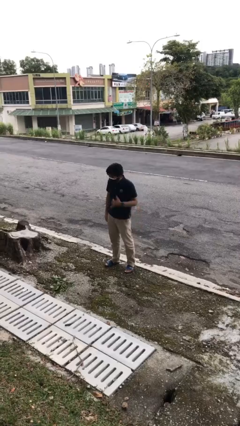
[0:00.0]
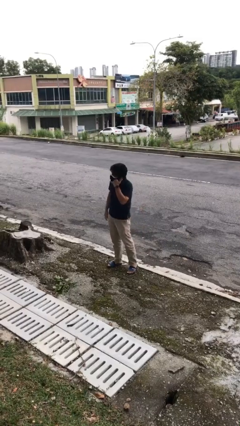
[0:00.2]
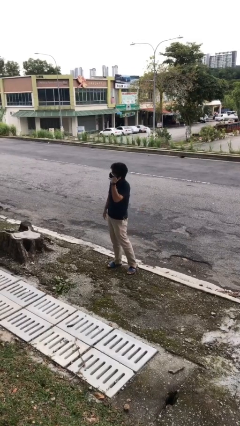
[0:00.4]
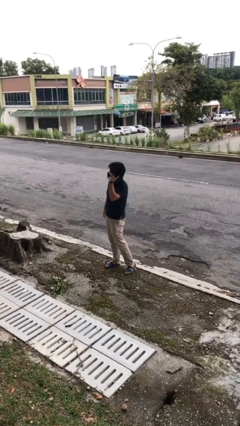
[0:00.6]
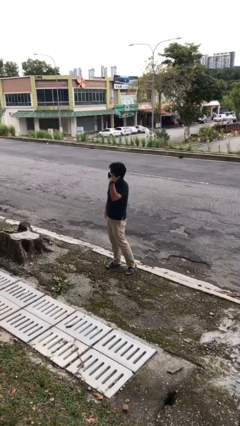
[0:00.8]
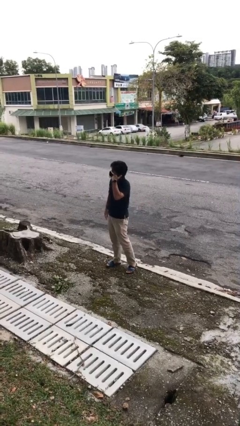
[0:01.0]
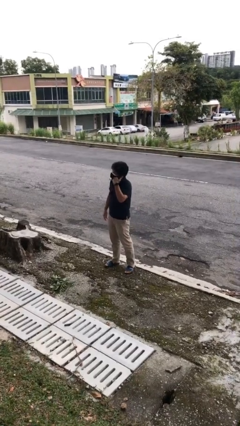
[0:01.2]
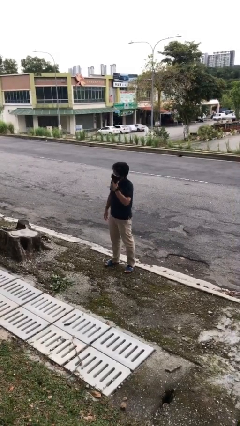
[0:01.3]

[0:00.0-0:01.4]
person gestures call me

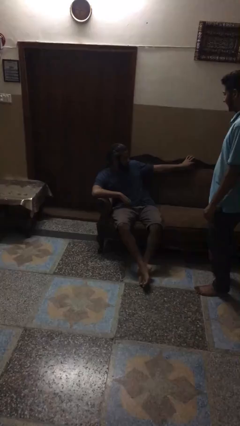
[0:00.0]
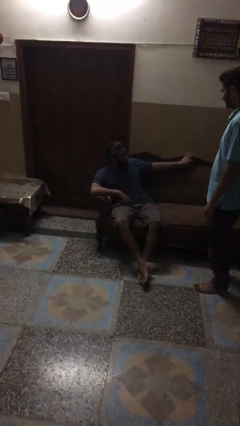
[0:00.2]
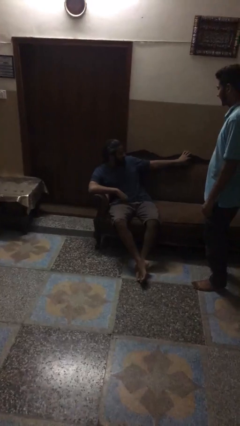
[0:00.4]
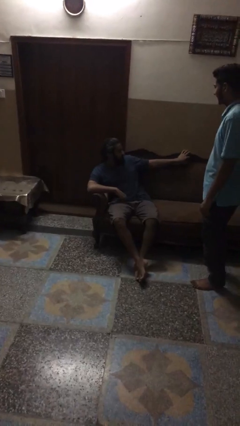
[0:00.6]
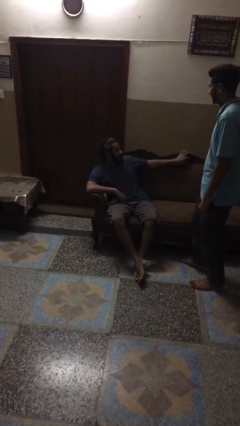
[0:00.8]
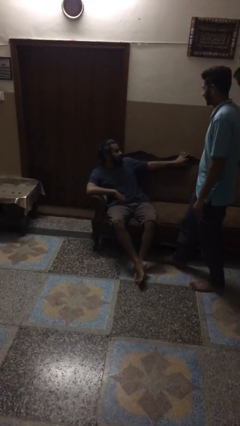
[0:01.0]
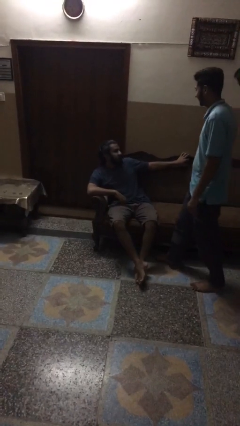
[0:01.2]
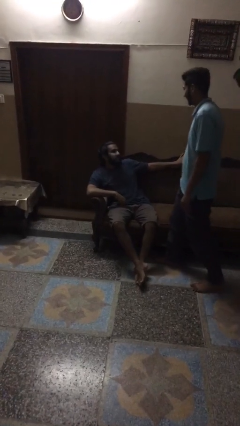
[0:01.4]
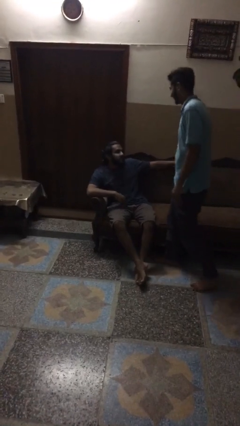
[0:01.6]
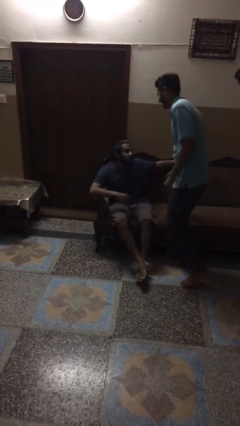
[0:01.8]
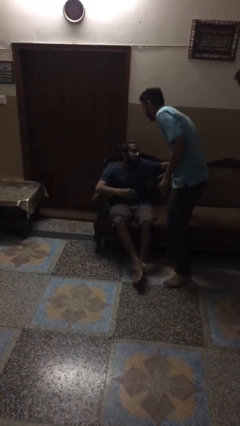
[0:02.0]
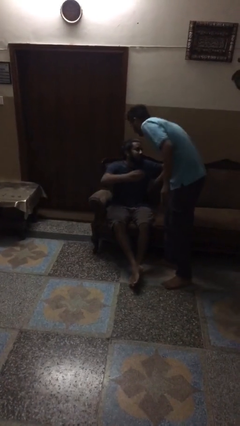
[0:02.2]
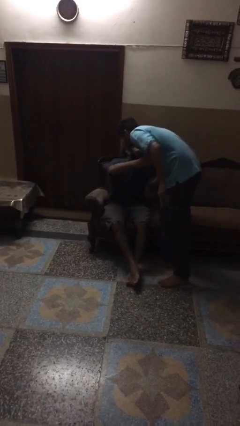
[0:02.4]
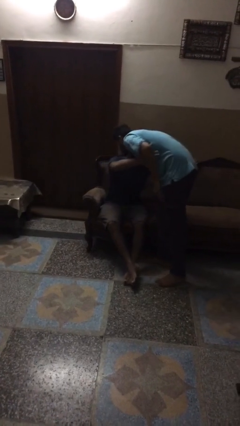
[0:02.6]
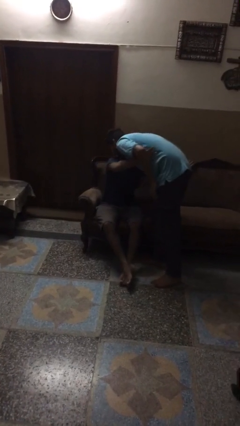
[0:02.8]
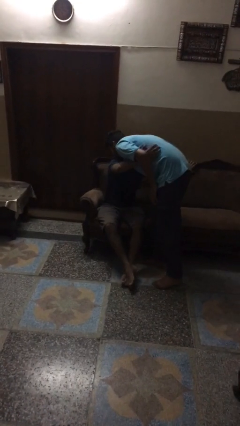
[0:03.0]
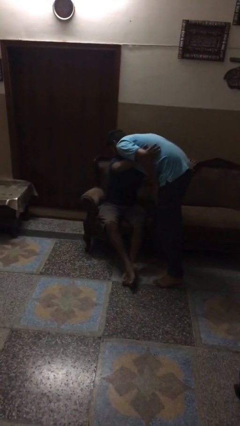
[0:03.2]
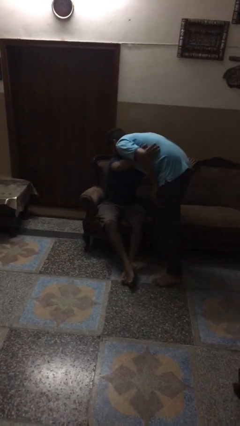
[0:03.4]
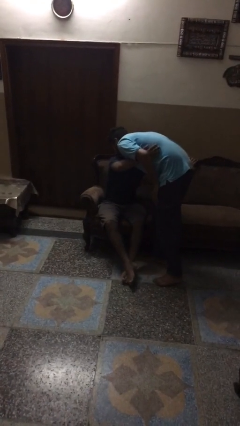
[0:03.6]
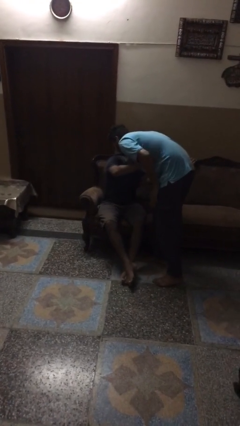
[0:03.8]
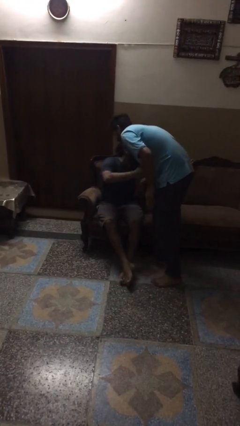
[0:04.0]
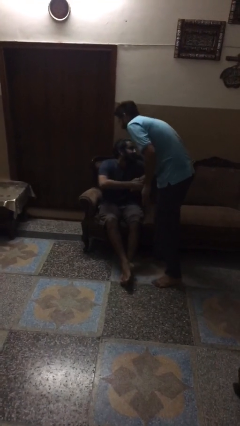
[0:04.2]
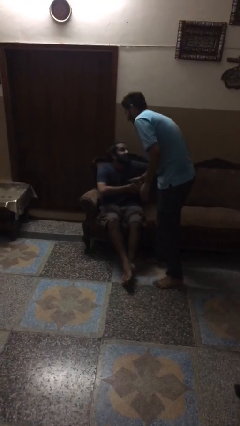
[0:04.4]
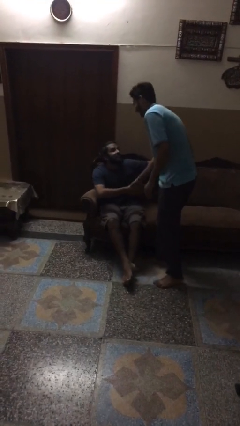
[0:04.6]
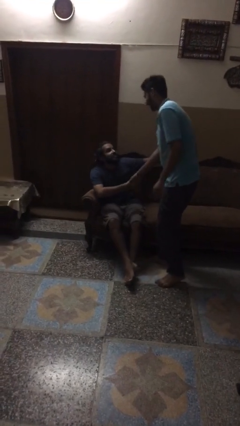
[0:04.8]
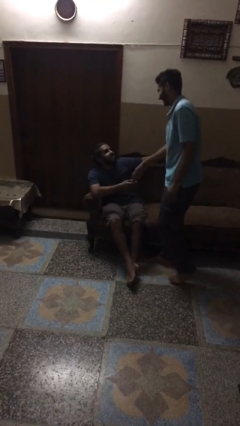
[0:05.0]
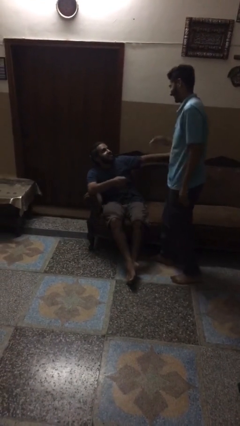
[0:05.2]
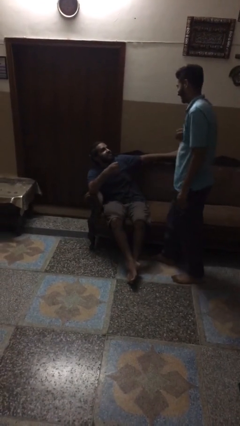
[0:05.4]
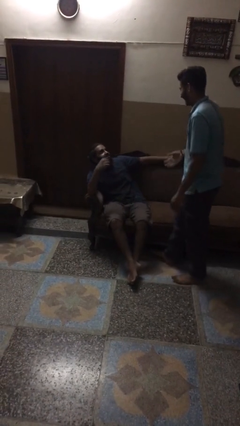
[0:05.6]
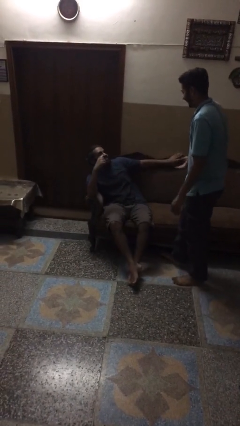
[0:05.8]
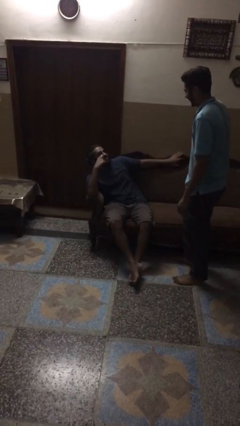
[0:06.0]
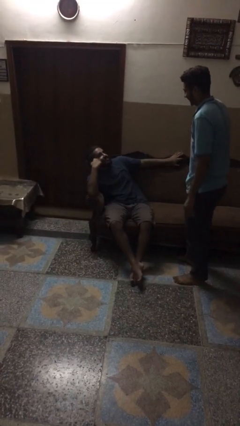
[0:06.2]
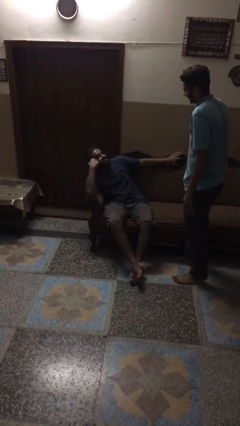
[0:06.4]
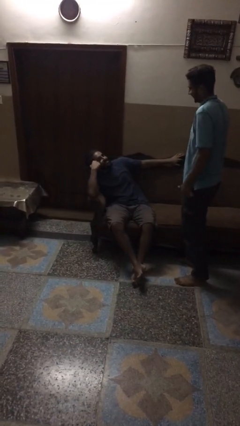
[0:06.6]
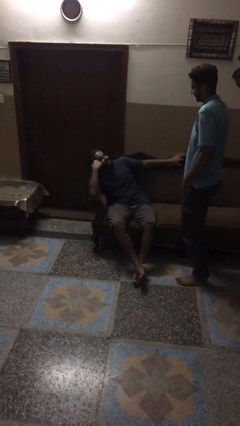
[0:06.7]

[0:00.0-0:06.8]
person embraces person

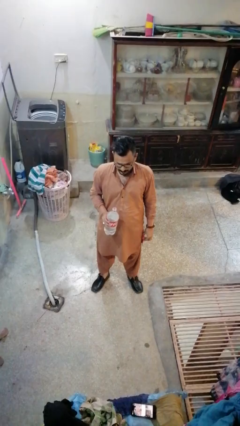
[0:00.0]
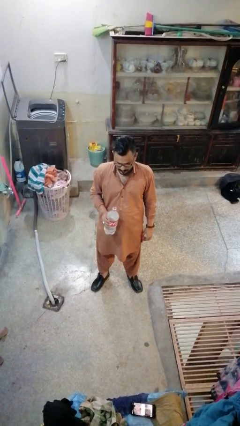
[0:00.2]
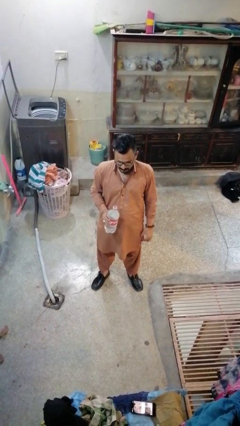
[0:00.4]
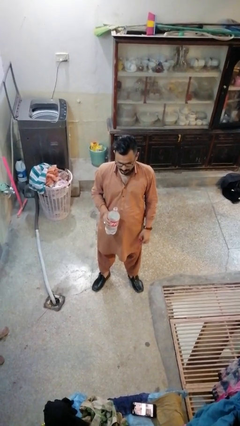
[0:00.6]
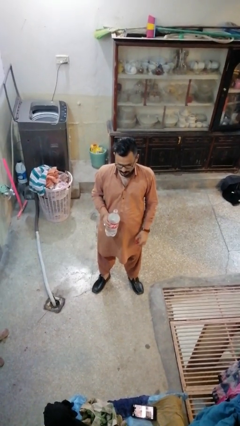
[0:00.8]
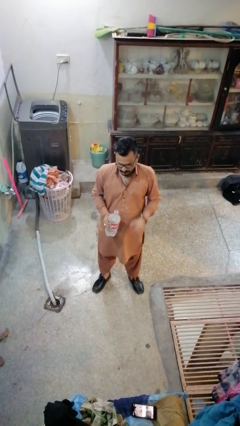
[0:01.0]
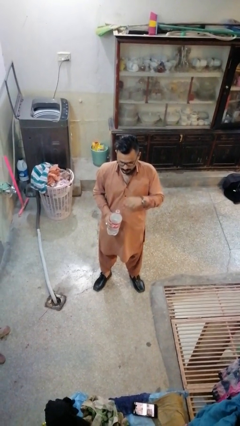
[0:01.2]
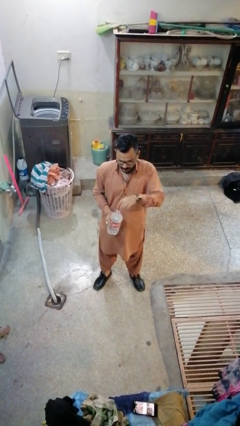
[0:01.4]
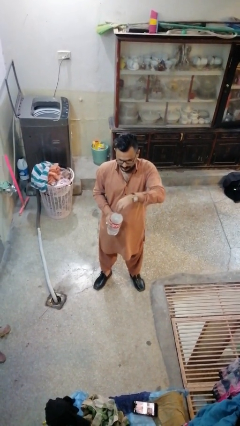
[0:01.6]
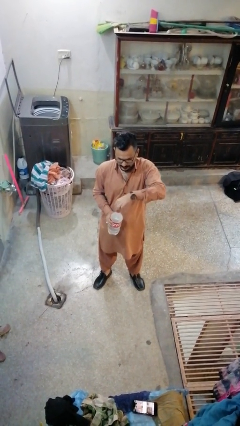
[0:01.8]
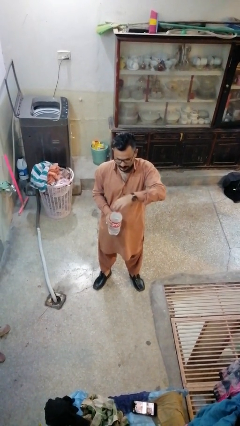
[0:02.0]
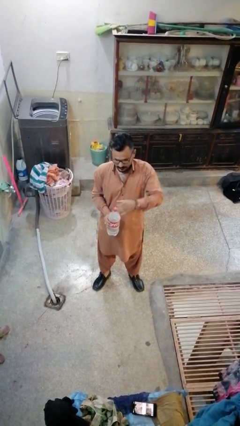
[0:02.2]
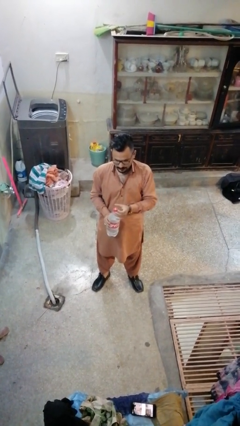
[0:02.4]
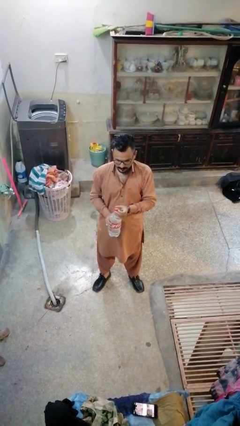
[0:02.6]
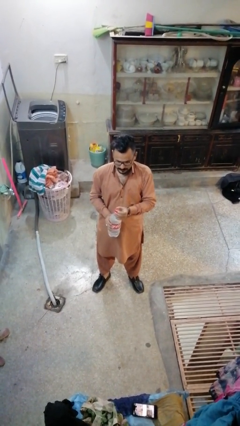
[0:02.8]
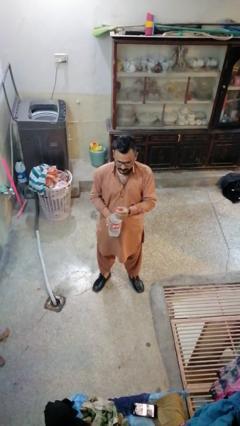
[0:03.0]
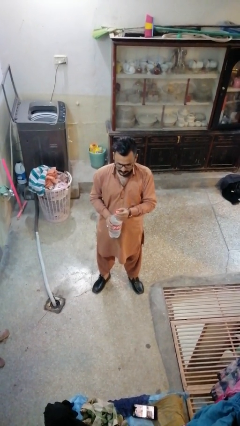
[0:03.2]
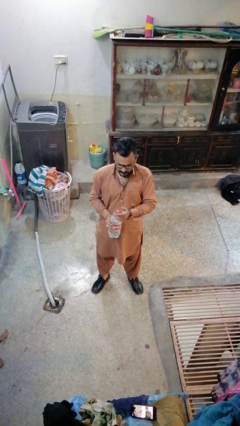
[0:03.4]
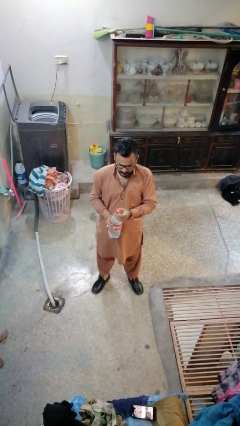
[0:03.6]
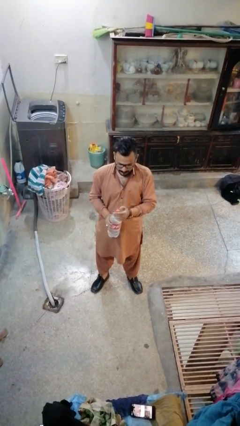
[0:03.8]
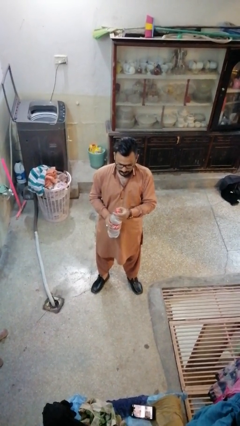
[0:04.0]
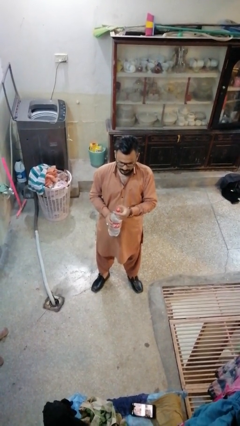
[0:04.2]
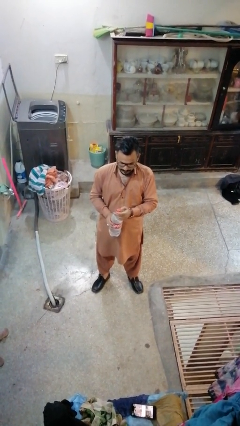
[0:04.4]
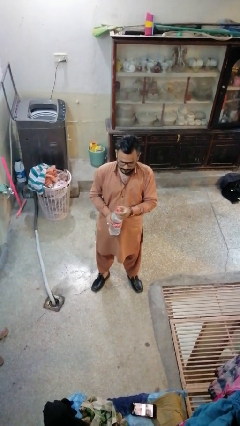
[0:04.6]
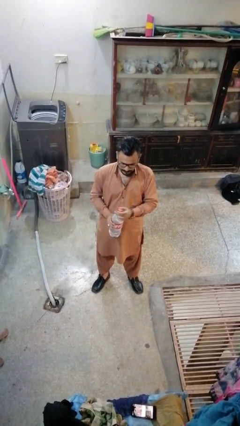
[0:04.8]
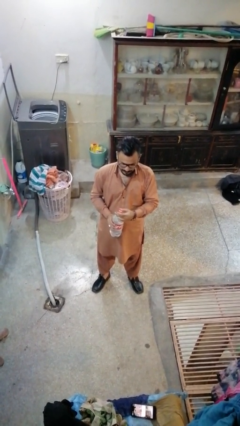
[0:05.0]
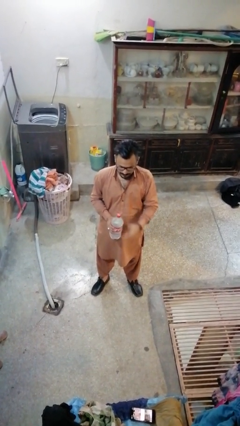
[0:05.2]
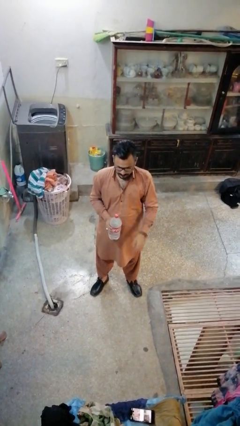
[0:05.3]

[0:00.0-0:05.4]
person screws lid to bottle

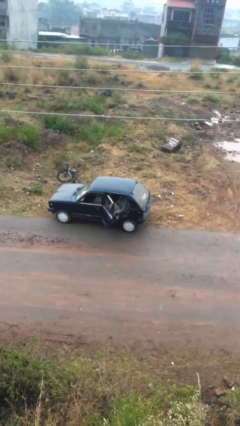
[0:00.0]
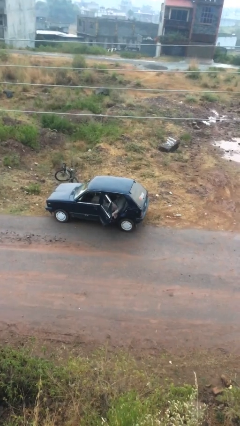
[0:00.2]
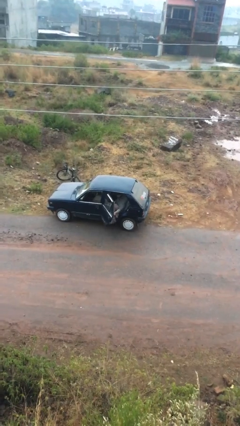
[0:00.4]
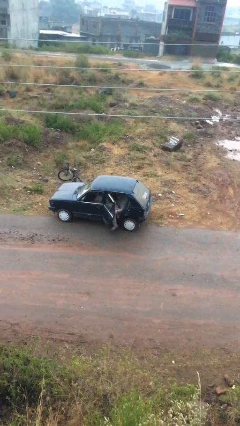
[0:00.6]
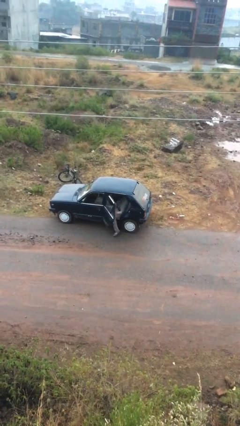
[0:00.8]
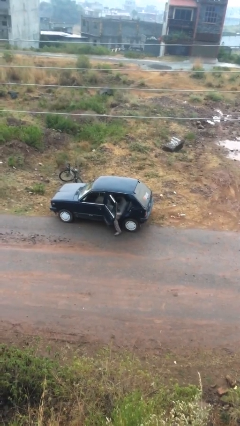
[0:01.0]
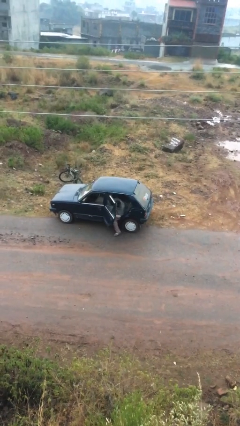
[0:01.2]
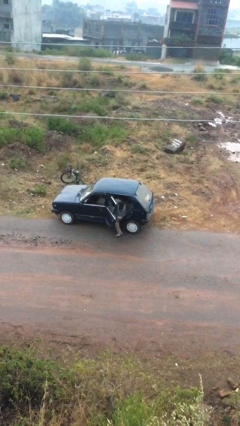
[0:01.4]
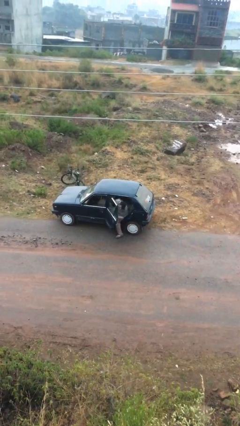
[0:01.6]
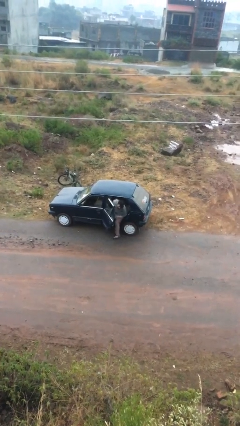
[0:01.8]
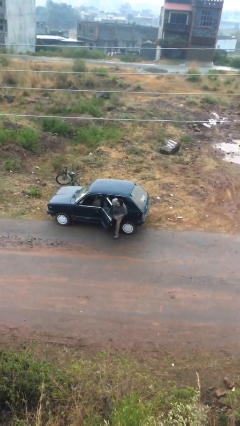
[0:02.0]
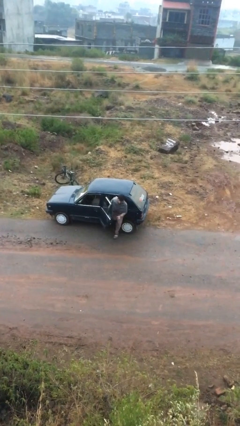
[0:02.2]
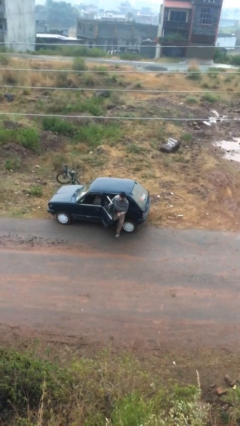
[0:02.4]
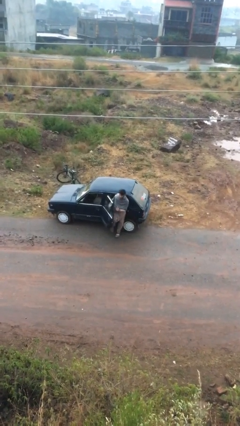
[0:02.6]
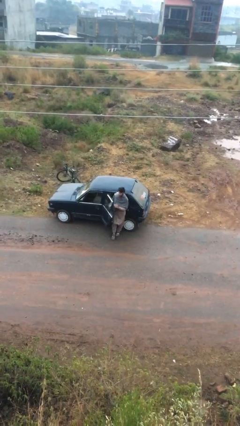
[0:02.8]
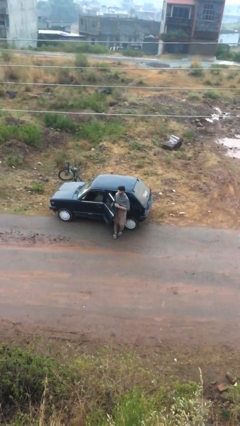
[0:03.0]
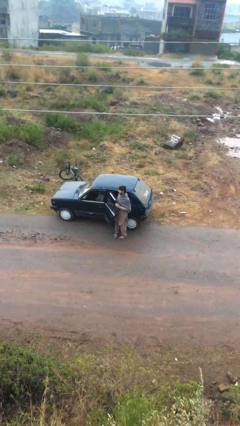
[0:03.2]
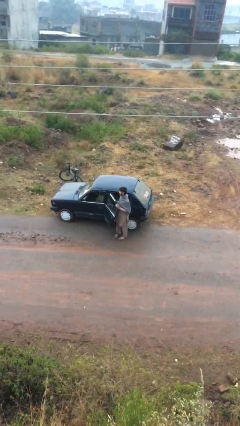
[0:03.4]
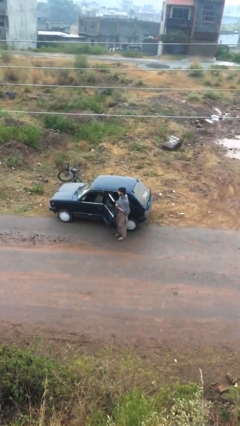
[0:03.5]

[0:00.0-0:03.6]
person exits car

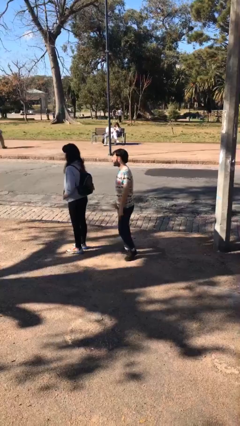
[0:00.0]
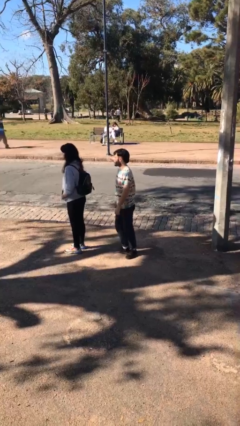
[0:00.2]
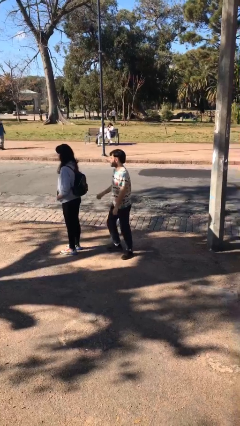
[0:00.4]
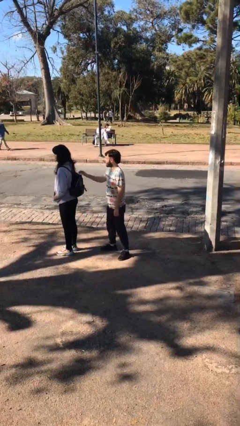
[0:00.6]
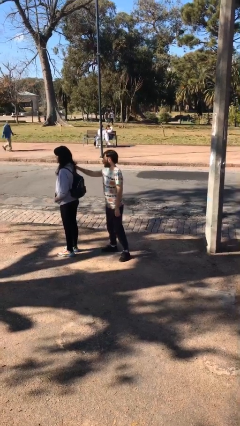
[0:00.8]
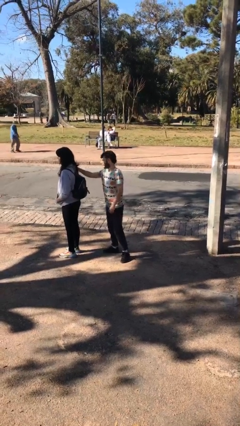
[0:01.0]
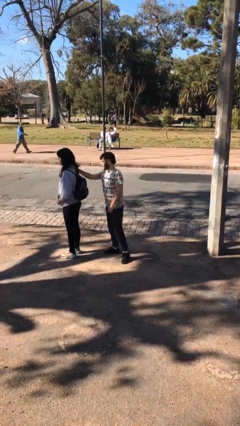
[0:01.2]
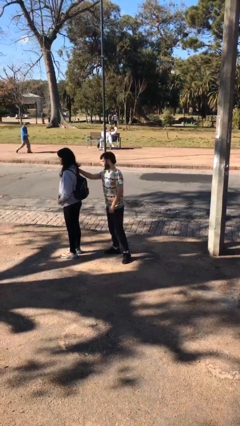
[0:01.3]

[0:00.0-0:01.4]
person grabs person by shoulder
